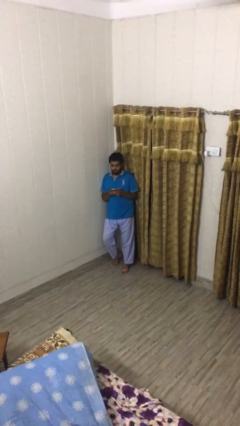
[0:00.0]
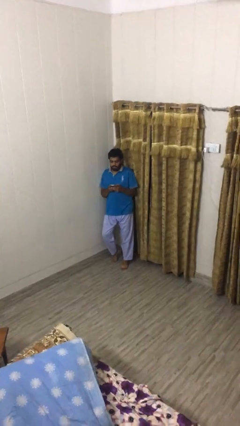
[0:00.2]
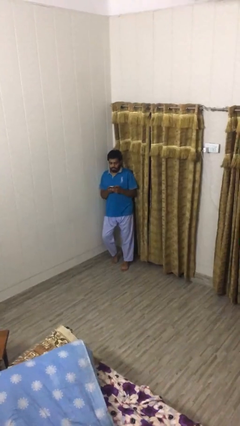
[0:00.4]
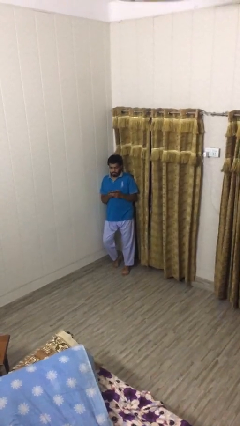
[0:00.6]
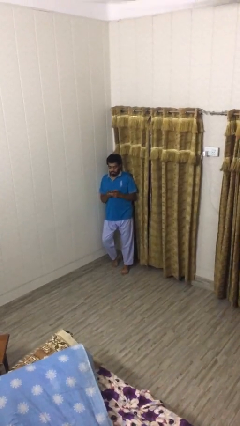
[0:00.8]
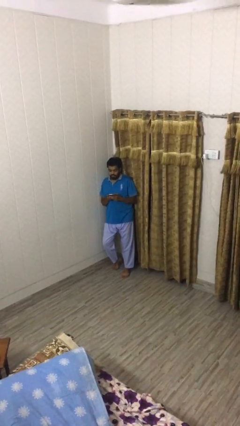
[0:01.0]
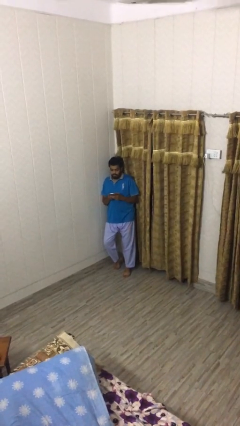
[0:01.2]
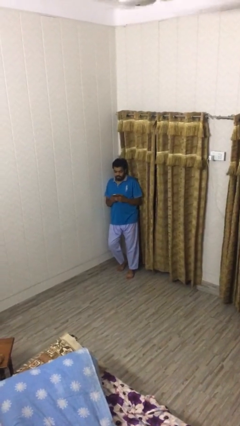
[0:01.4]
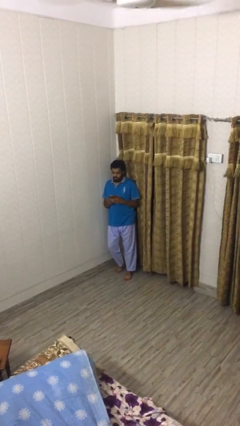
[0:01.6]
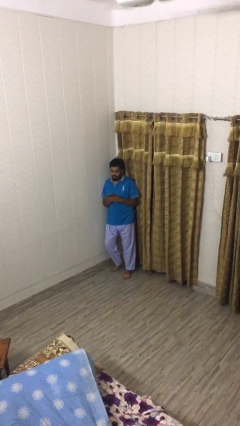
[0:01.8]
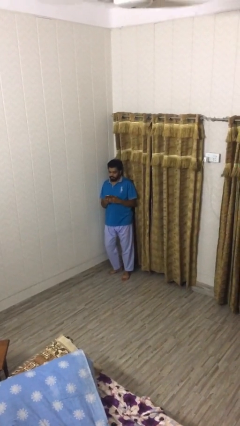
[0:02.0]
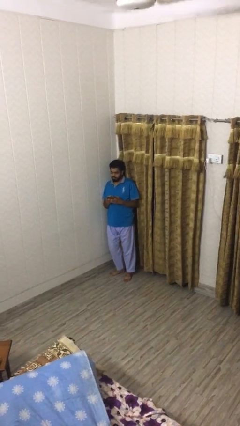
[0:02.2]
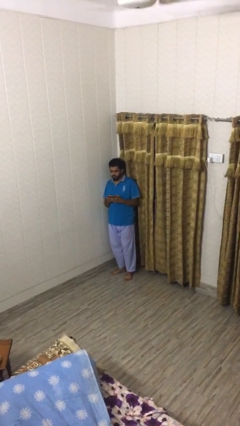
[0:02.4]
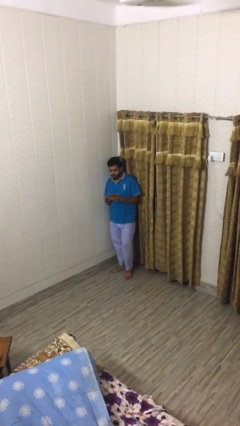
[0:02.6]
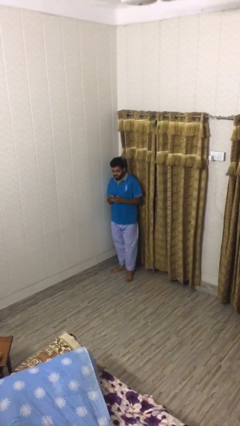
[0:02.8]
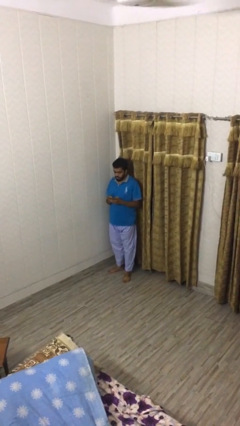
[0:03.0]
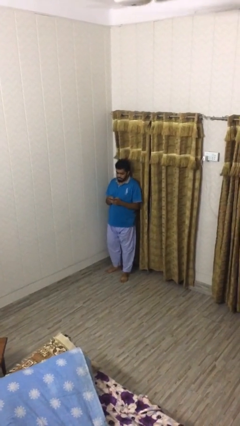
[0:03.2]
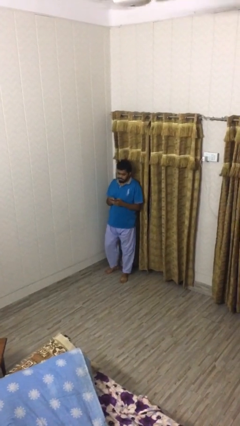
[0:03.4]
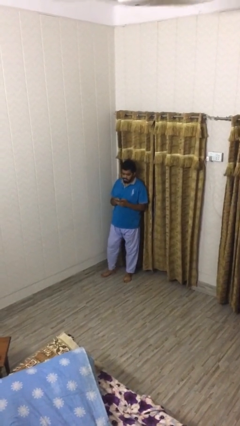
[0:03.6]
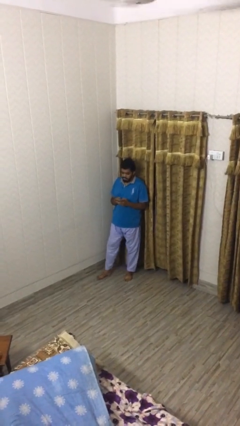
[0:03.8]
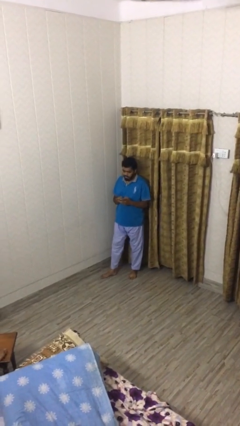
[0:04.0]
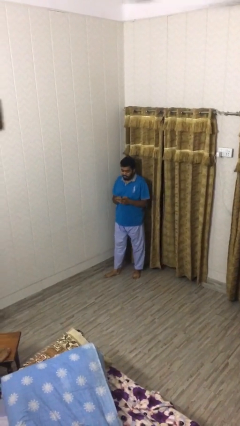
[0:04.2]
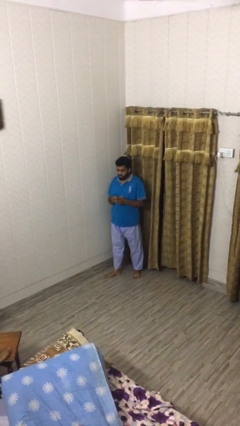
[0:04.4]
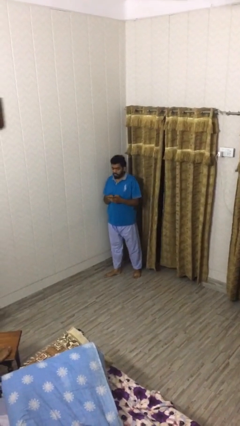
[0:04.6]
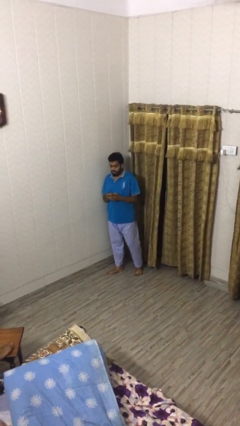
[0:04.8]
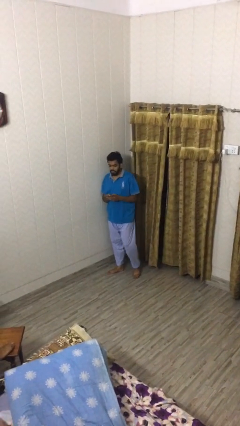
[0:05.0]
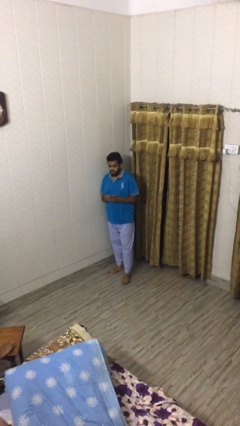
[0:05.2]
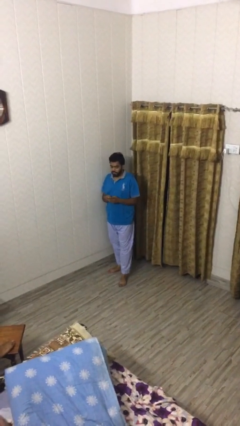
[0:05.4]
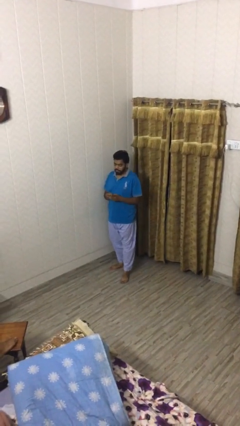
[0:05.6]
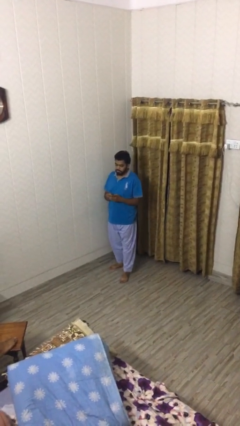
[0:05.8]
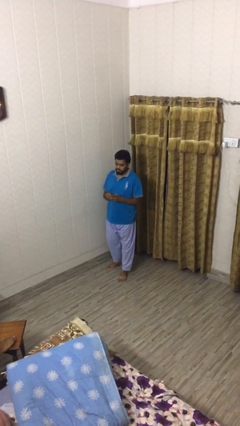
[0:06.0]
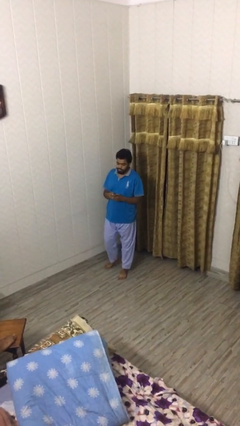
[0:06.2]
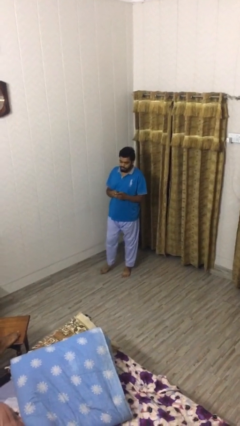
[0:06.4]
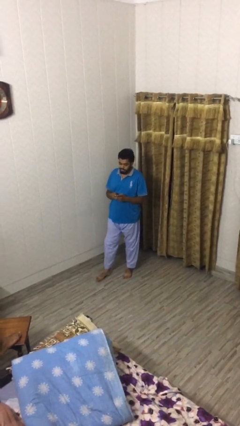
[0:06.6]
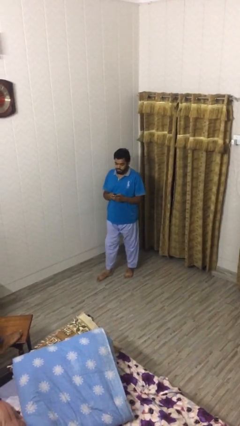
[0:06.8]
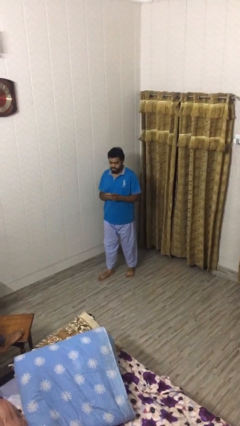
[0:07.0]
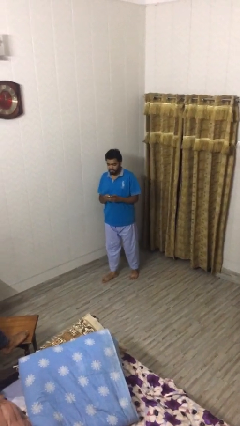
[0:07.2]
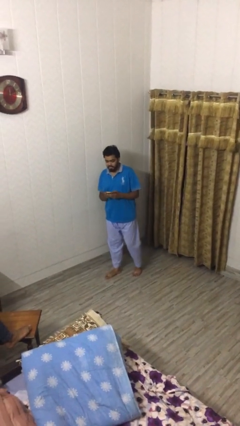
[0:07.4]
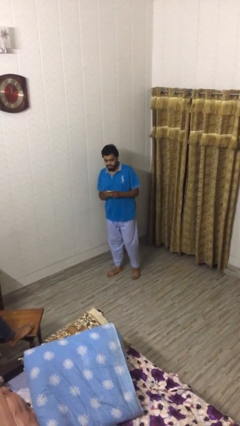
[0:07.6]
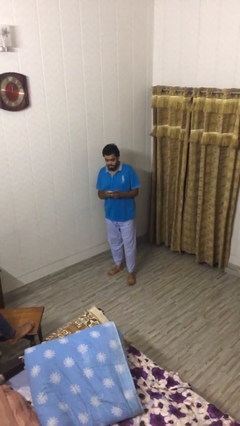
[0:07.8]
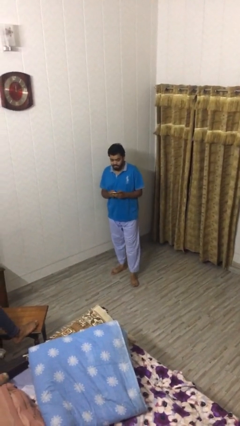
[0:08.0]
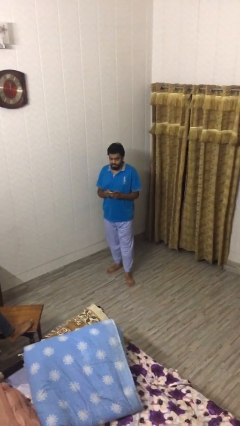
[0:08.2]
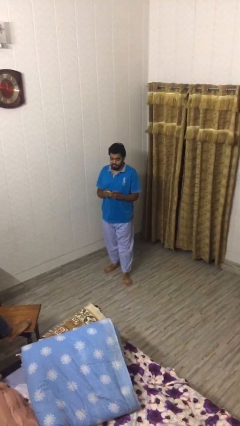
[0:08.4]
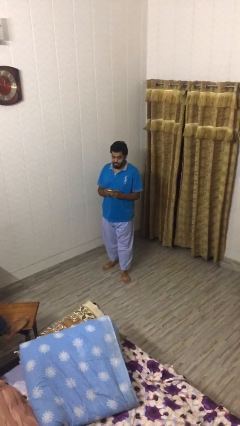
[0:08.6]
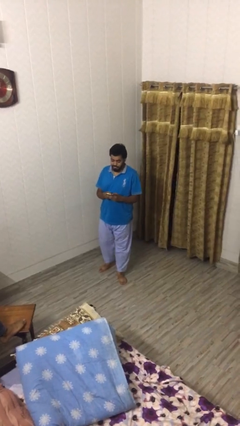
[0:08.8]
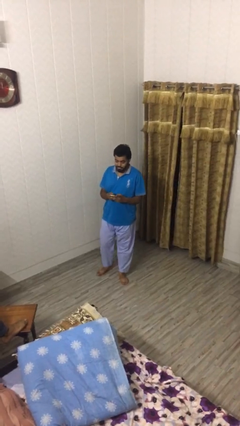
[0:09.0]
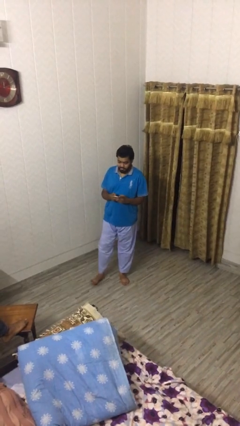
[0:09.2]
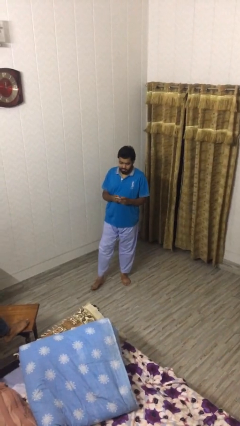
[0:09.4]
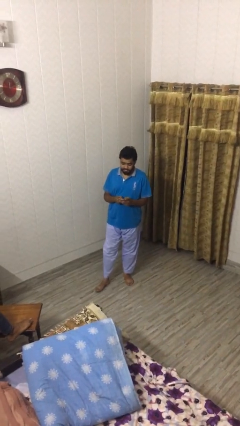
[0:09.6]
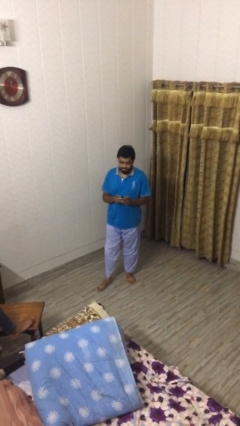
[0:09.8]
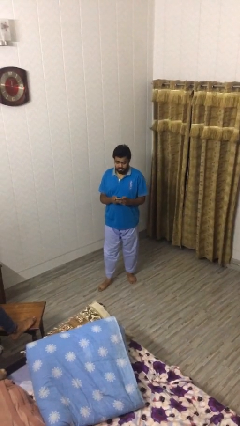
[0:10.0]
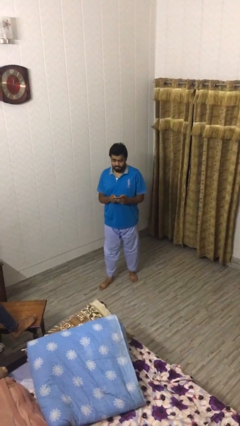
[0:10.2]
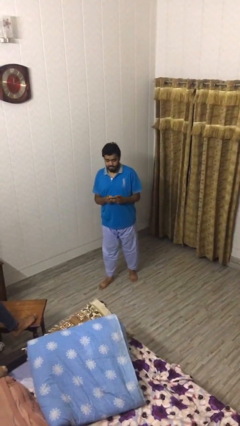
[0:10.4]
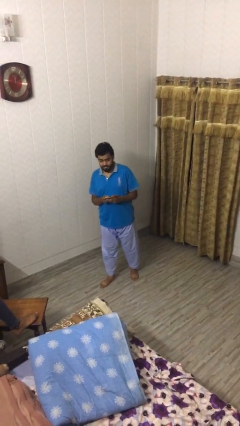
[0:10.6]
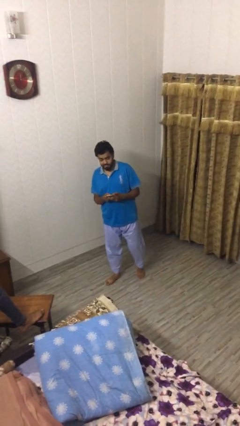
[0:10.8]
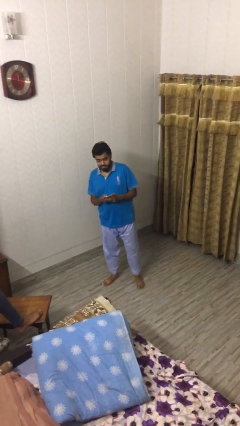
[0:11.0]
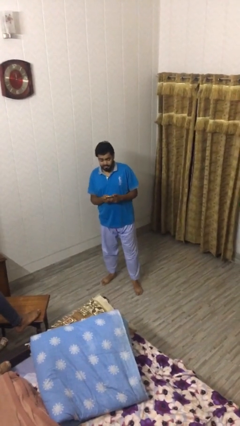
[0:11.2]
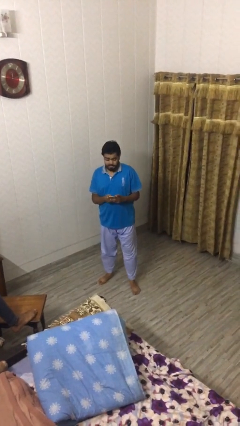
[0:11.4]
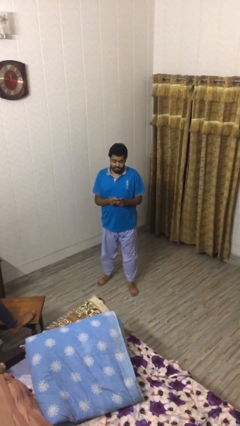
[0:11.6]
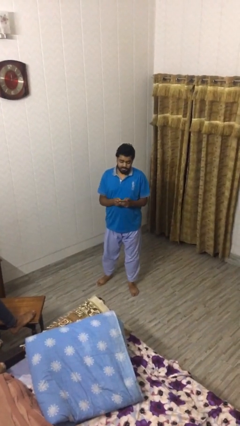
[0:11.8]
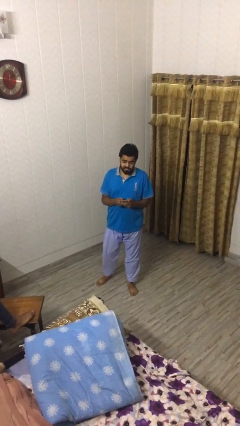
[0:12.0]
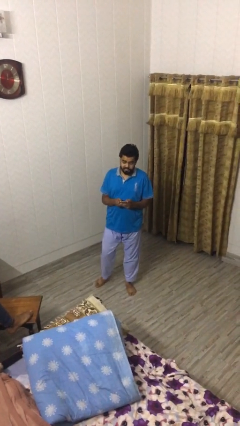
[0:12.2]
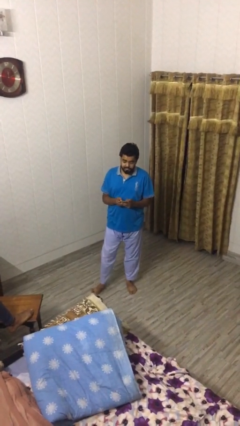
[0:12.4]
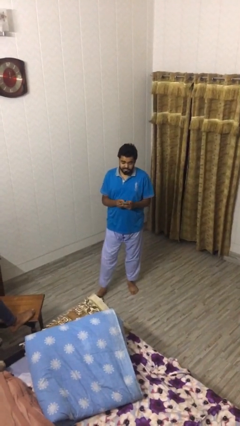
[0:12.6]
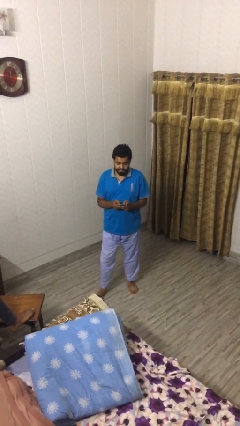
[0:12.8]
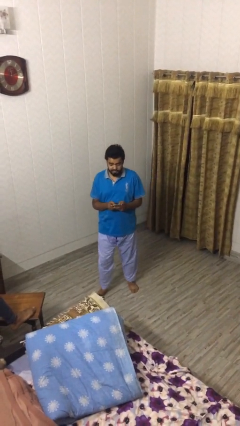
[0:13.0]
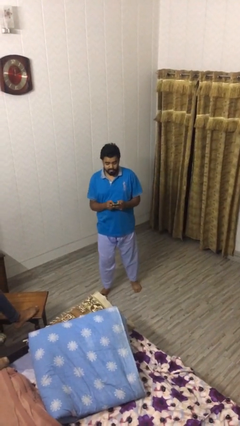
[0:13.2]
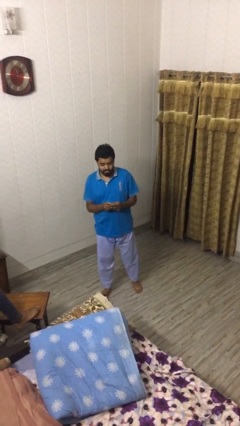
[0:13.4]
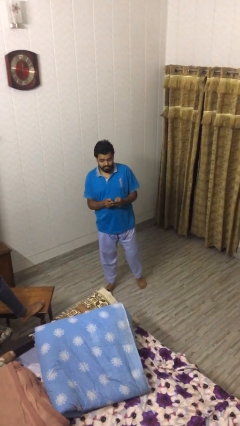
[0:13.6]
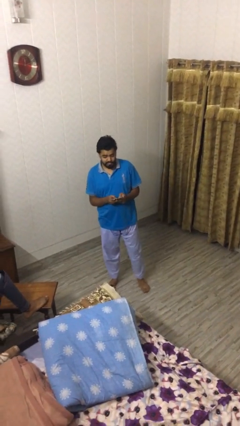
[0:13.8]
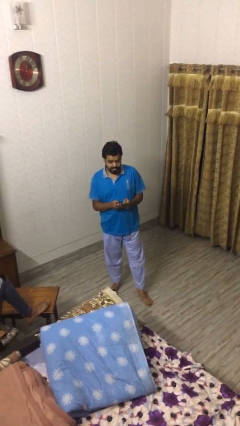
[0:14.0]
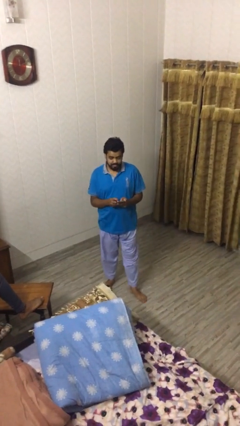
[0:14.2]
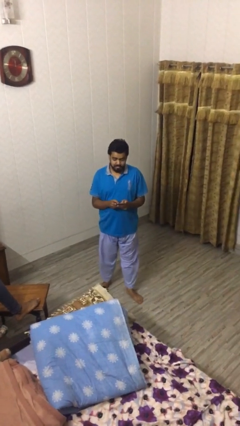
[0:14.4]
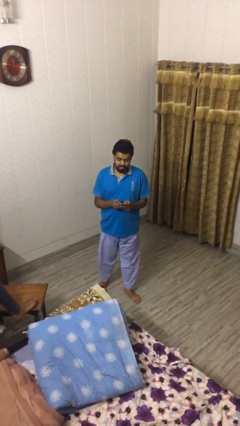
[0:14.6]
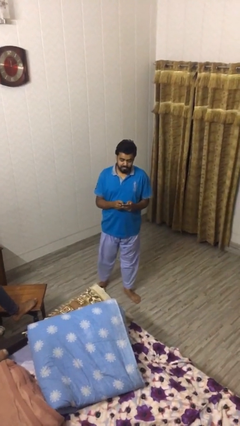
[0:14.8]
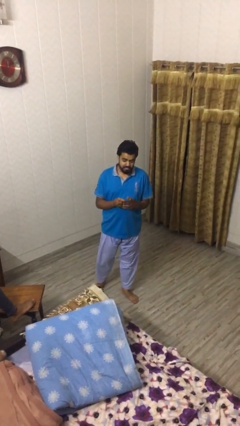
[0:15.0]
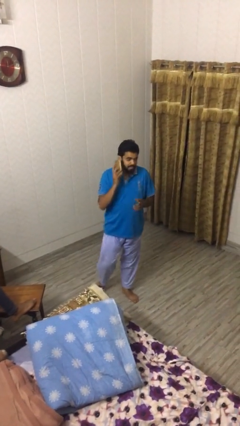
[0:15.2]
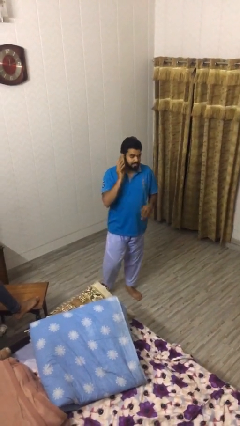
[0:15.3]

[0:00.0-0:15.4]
person texts on phone

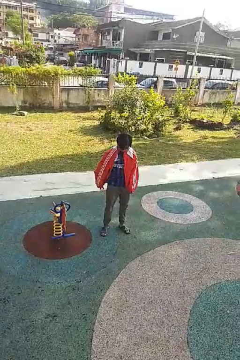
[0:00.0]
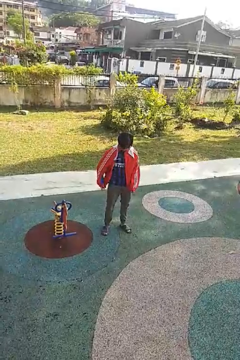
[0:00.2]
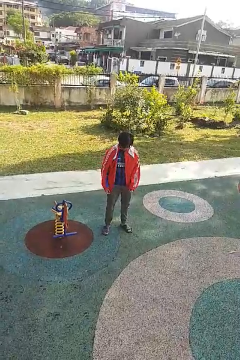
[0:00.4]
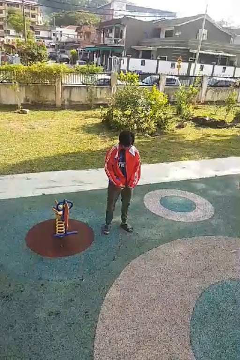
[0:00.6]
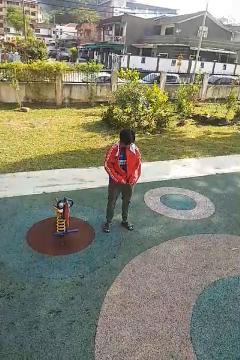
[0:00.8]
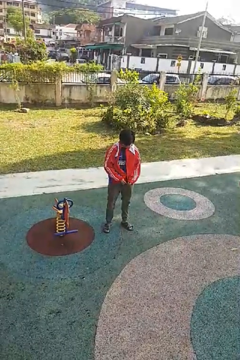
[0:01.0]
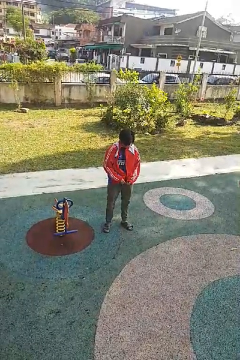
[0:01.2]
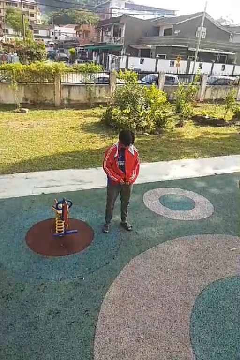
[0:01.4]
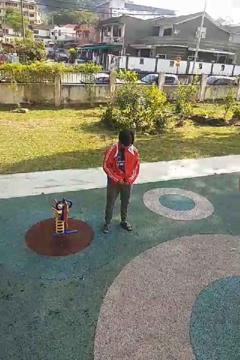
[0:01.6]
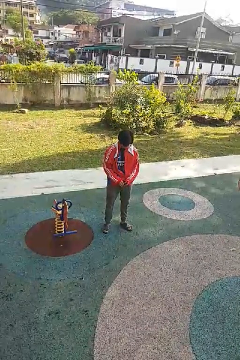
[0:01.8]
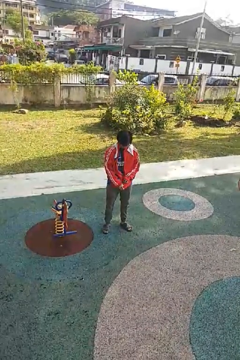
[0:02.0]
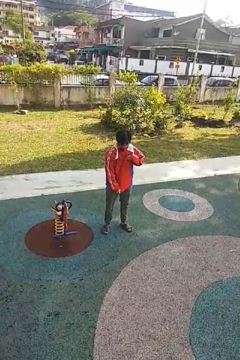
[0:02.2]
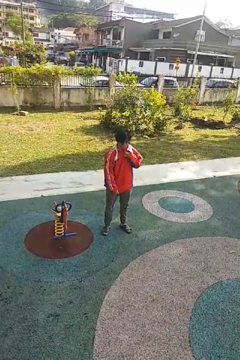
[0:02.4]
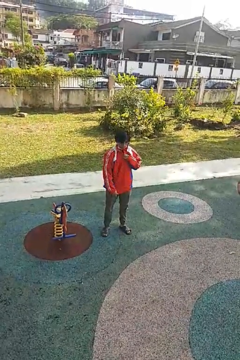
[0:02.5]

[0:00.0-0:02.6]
person zips up jacket

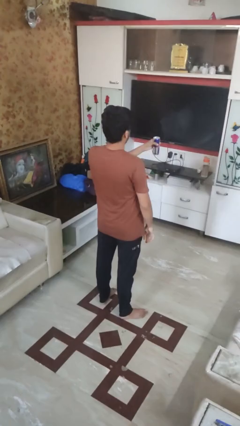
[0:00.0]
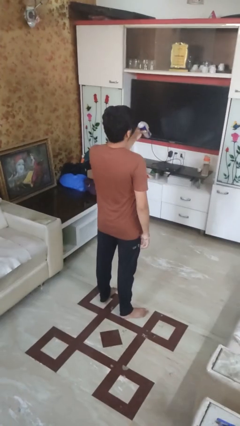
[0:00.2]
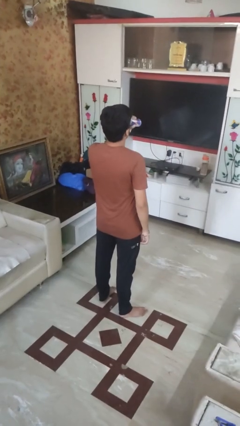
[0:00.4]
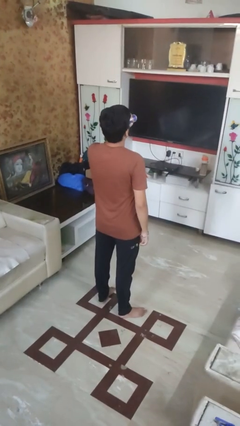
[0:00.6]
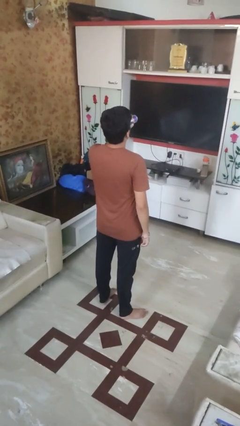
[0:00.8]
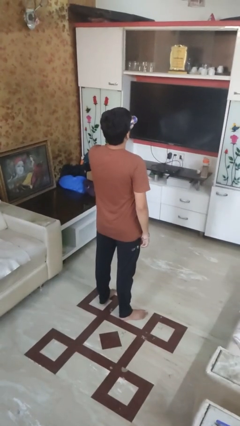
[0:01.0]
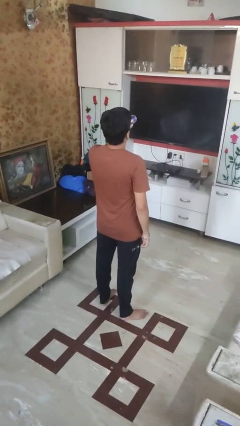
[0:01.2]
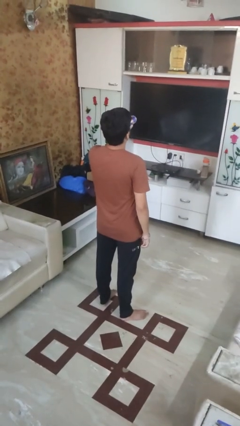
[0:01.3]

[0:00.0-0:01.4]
person drinks from beverage can
